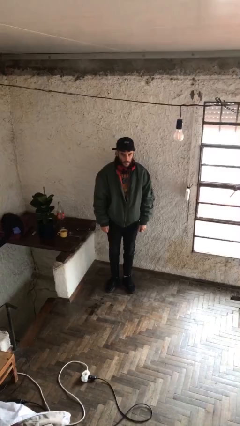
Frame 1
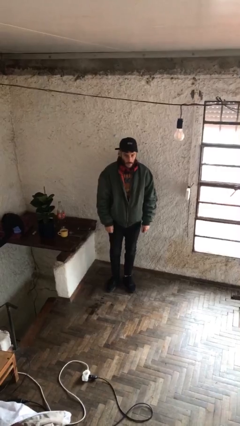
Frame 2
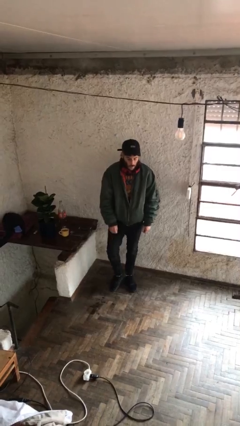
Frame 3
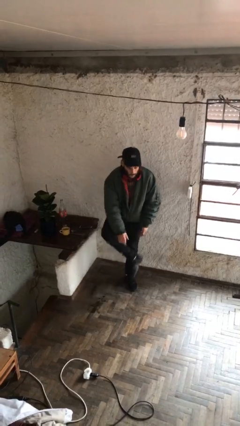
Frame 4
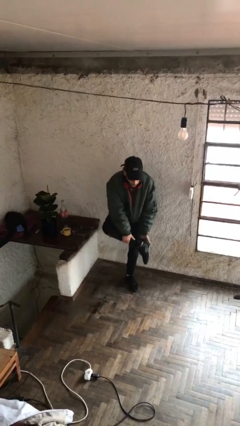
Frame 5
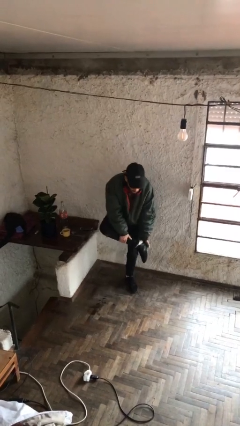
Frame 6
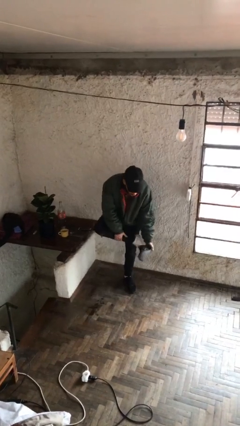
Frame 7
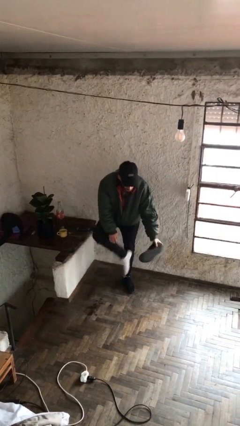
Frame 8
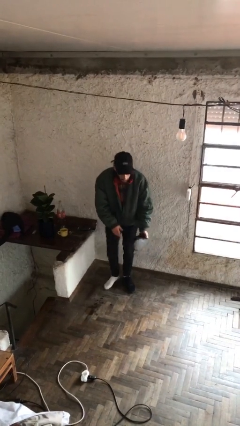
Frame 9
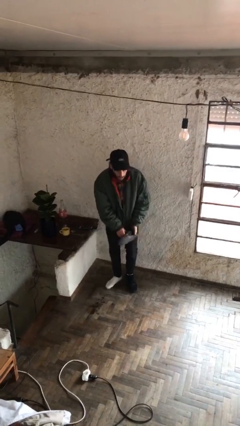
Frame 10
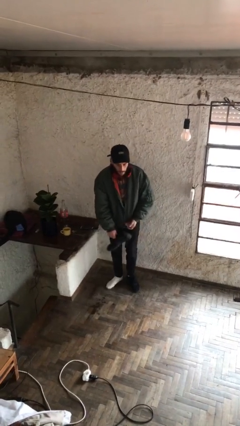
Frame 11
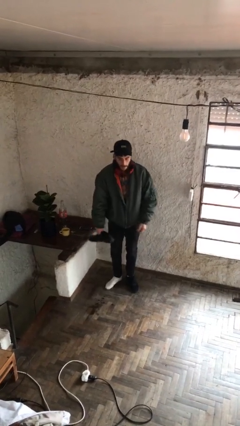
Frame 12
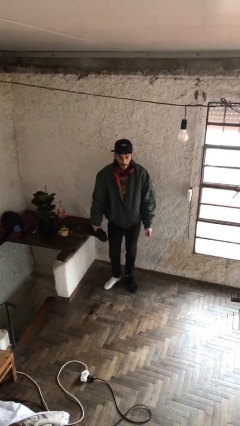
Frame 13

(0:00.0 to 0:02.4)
person takes off shoes

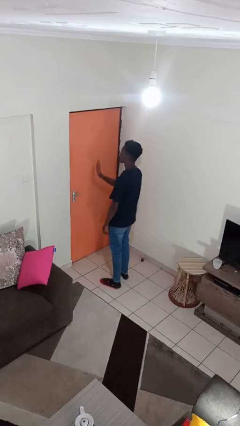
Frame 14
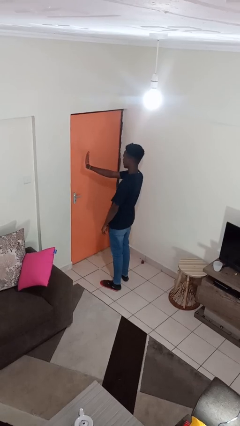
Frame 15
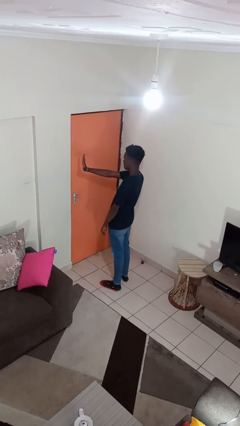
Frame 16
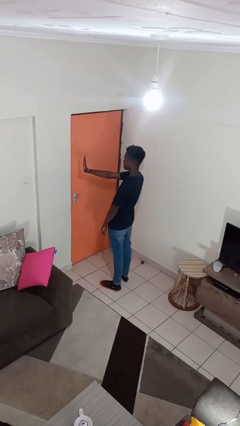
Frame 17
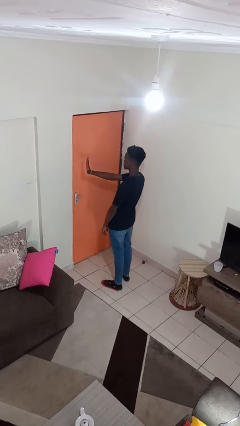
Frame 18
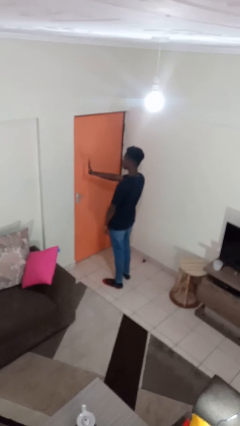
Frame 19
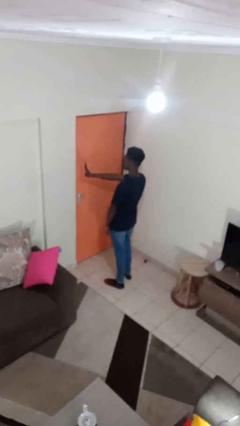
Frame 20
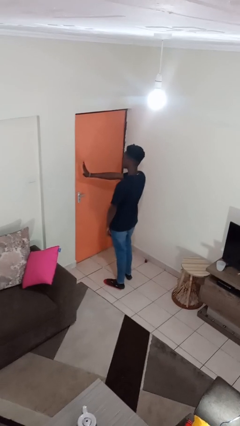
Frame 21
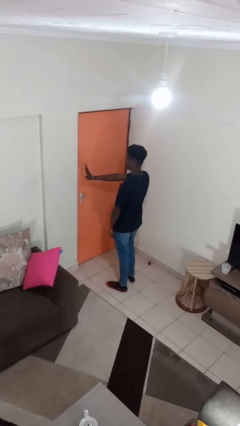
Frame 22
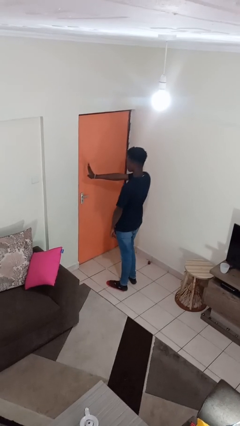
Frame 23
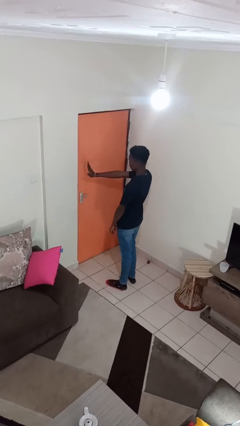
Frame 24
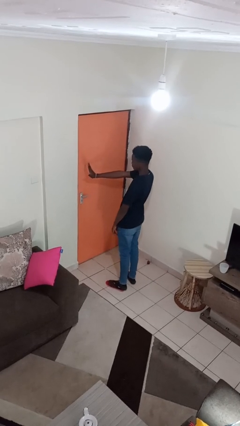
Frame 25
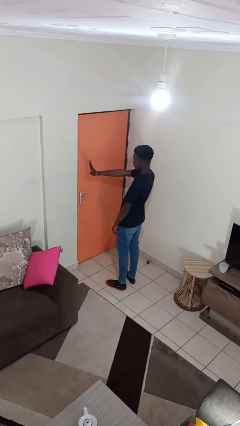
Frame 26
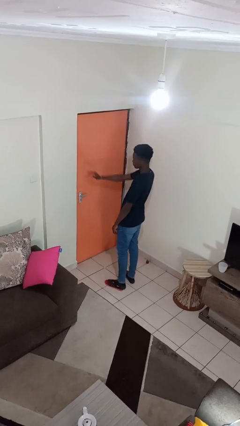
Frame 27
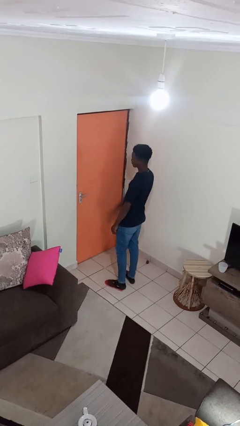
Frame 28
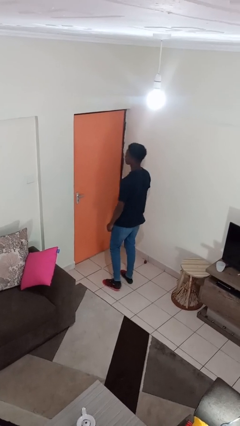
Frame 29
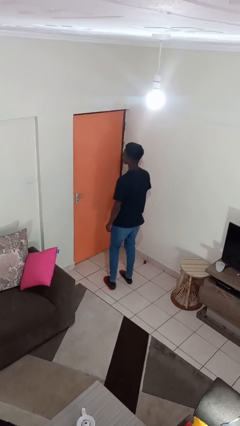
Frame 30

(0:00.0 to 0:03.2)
person gestures stop

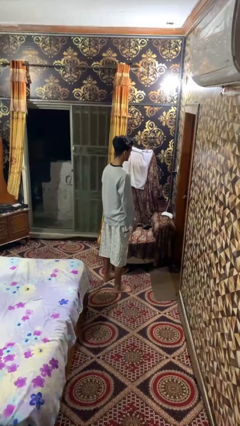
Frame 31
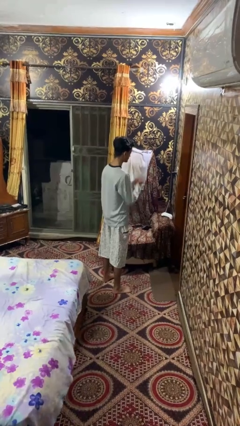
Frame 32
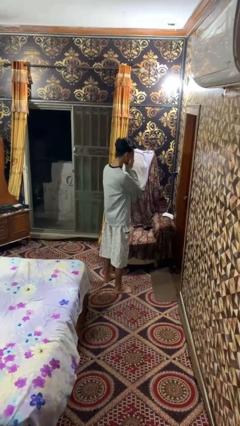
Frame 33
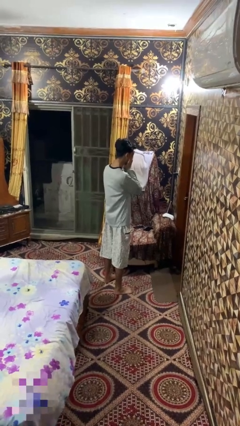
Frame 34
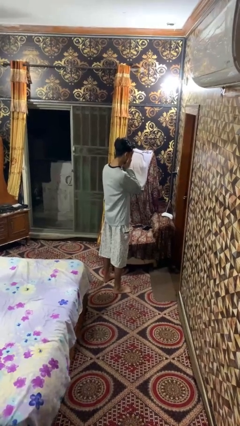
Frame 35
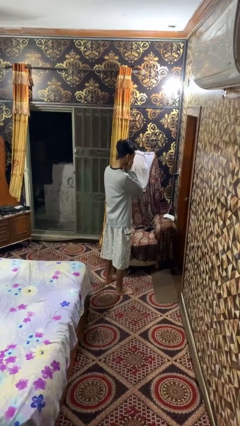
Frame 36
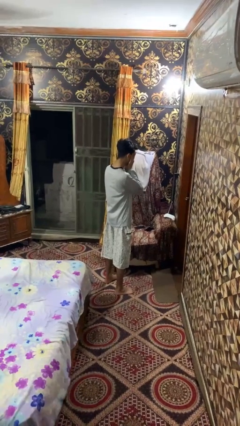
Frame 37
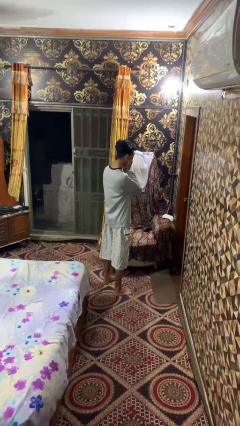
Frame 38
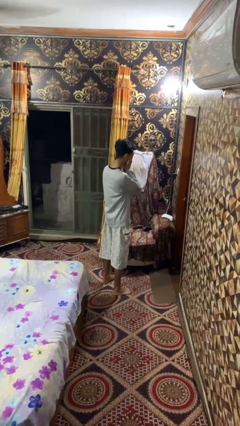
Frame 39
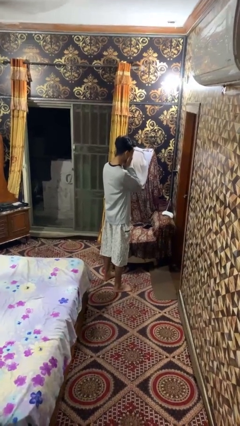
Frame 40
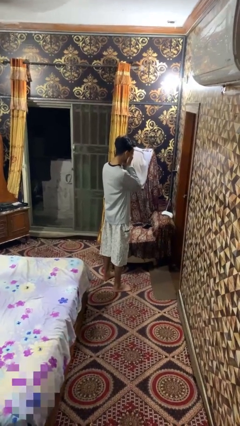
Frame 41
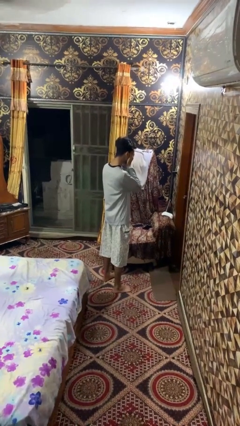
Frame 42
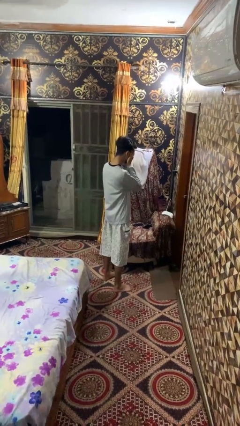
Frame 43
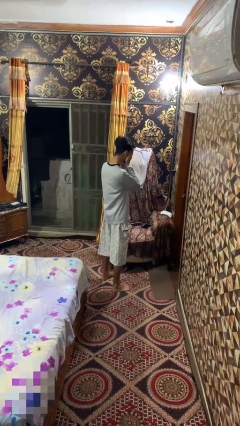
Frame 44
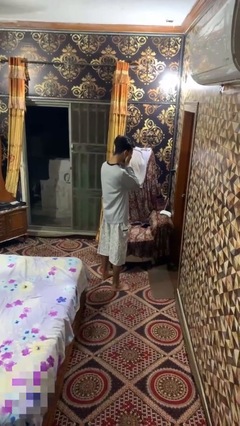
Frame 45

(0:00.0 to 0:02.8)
person covers face with hands

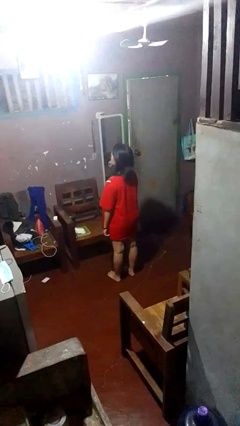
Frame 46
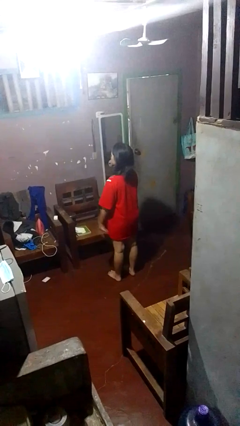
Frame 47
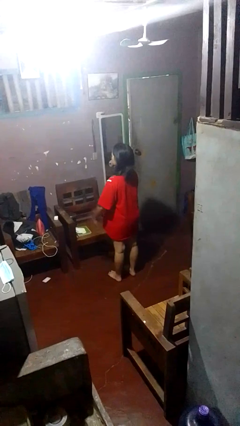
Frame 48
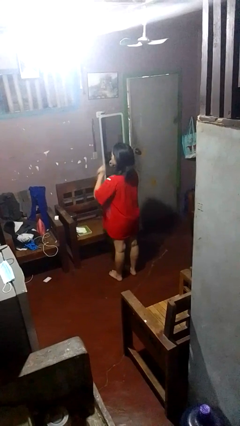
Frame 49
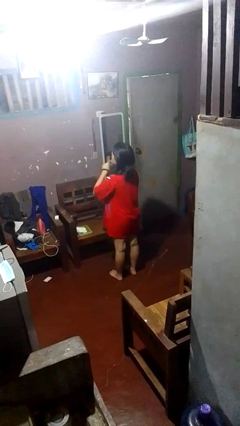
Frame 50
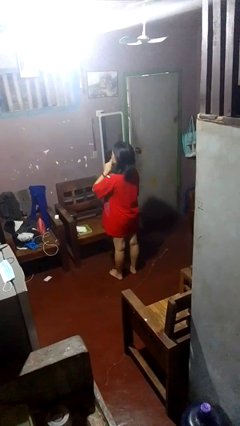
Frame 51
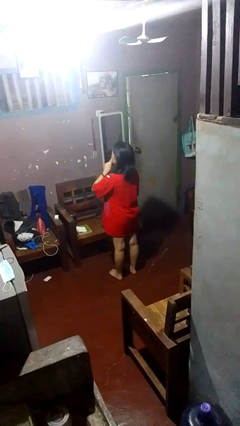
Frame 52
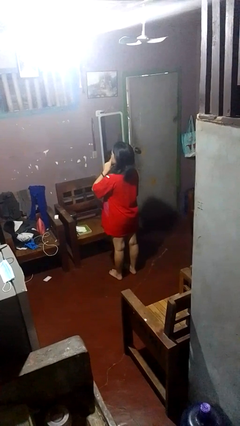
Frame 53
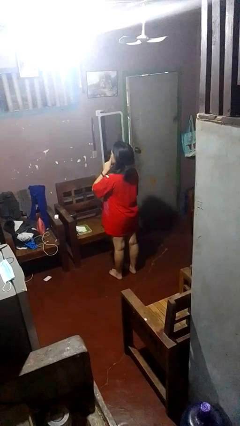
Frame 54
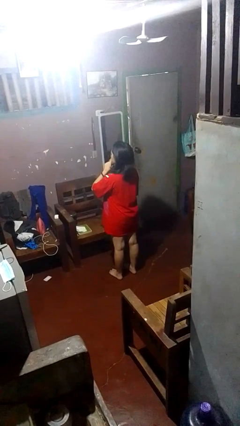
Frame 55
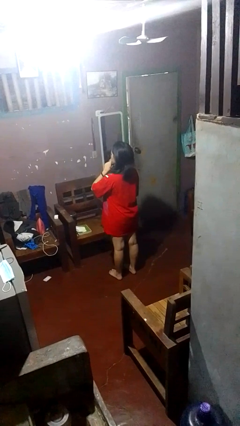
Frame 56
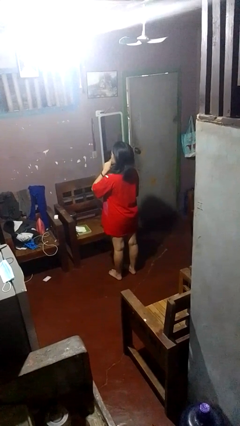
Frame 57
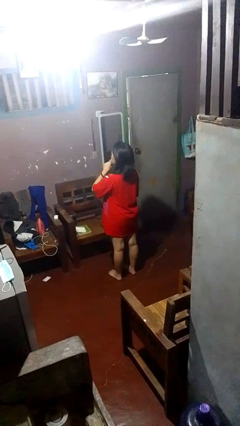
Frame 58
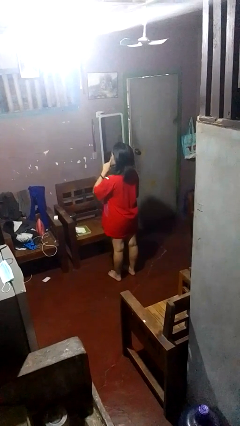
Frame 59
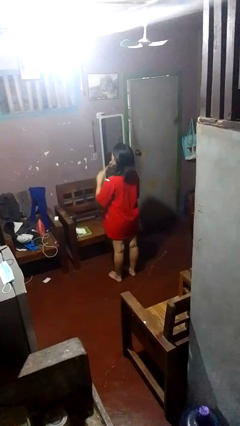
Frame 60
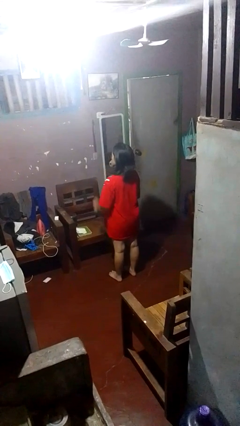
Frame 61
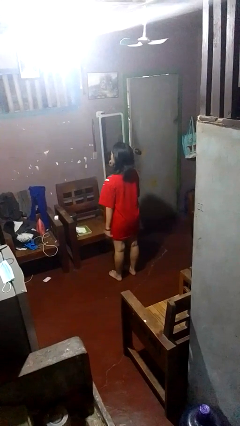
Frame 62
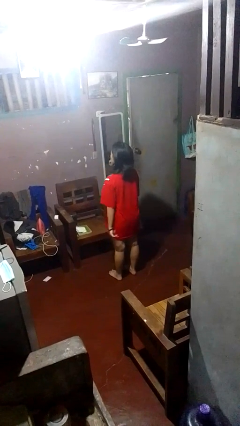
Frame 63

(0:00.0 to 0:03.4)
person gestures be quiet

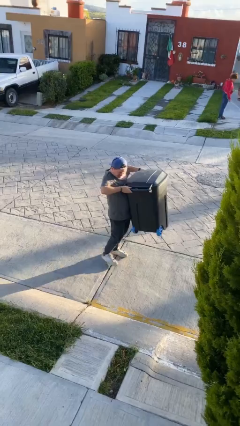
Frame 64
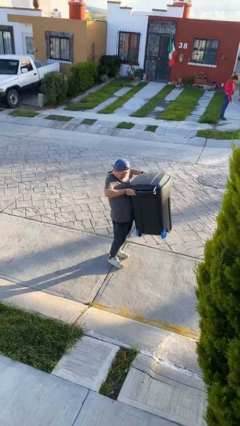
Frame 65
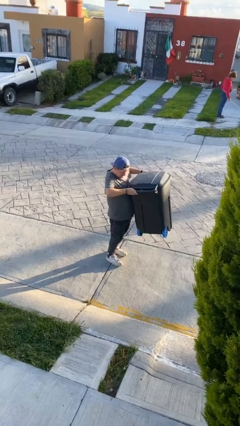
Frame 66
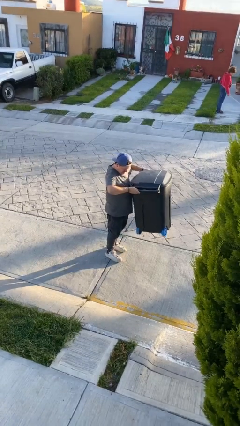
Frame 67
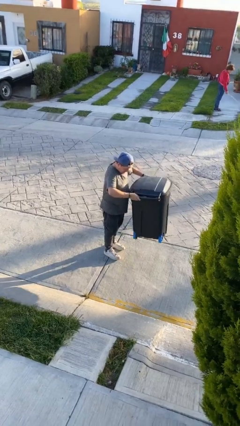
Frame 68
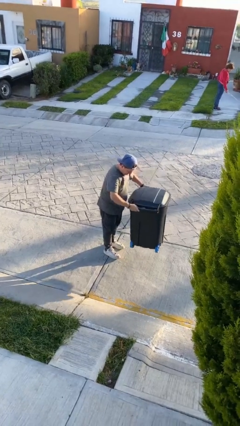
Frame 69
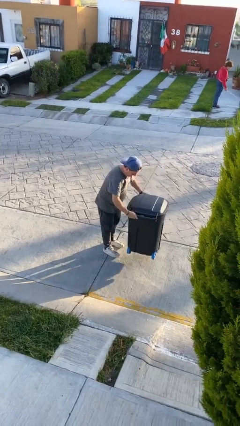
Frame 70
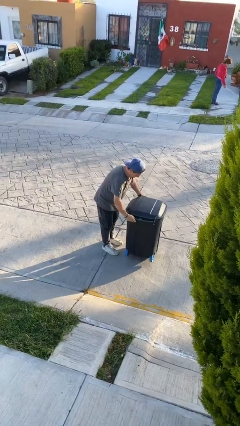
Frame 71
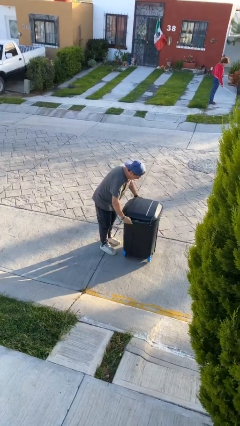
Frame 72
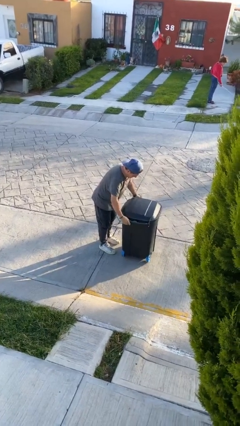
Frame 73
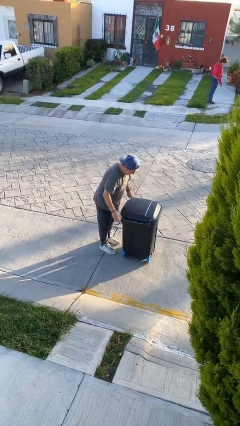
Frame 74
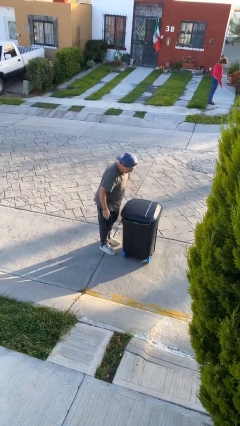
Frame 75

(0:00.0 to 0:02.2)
person puts down object on floor

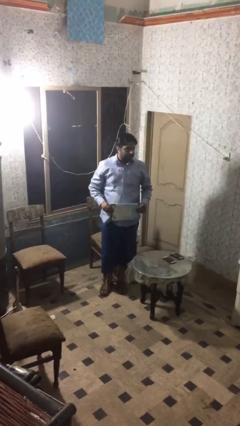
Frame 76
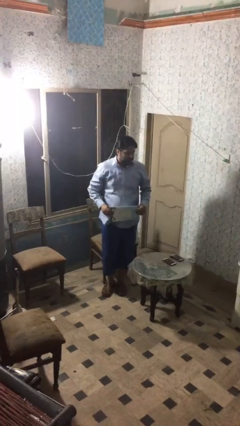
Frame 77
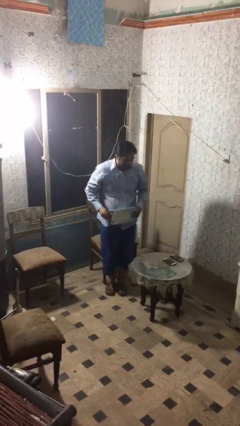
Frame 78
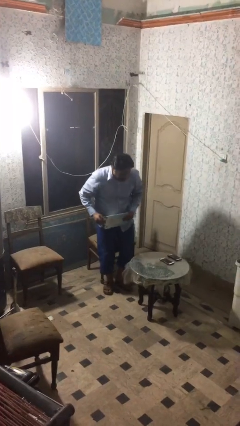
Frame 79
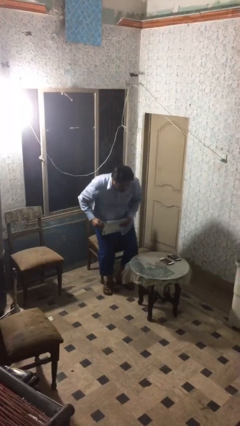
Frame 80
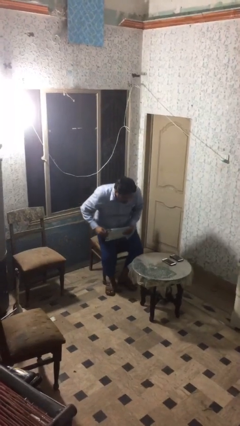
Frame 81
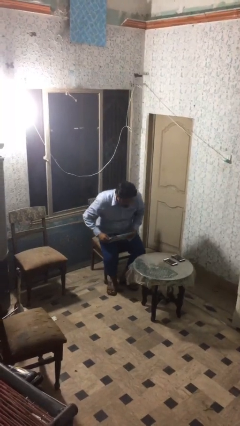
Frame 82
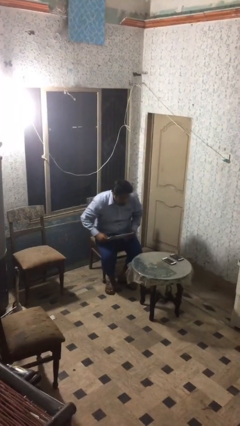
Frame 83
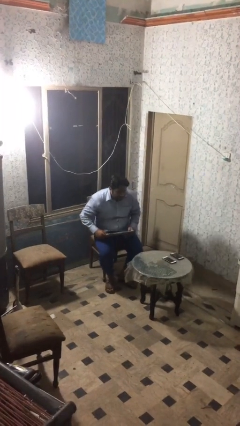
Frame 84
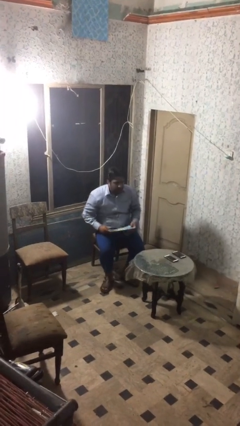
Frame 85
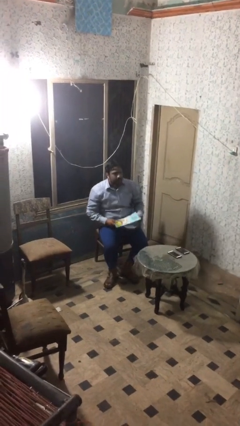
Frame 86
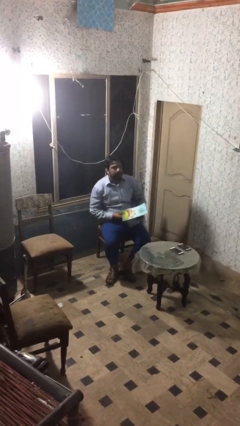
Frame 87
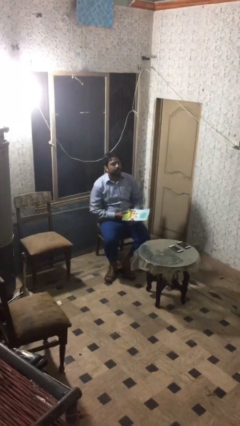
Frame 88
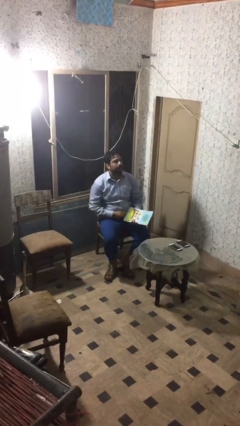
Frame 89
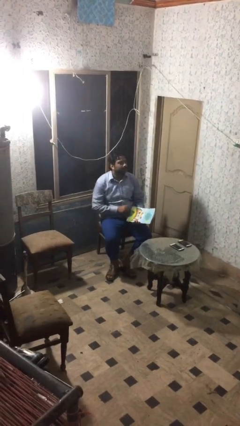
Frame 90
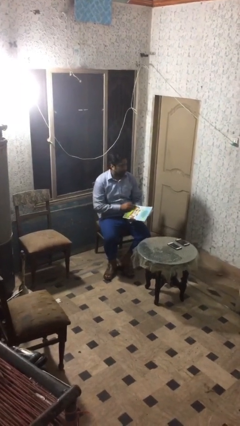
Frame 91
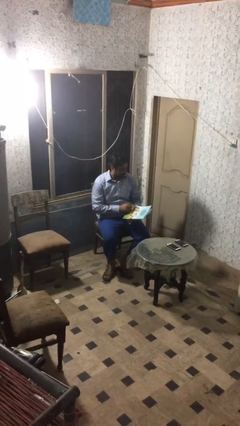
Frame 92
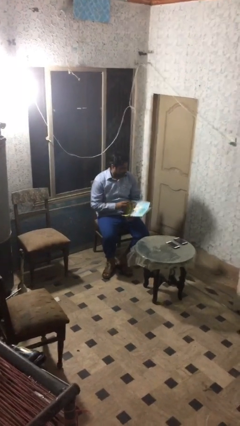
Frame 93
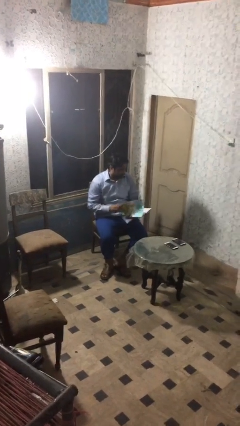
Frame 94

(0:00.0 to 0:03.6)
person sits down
